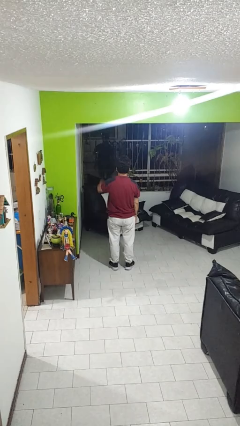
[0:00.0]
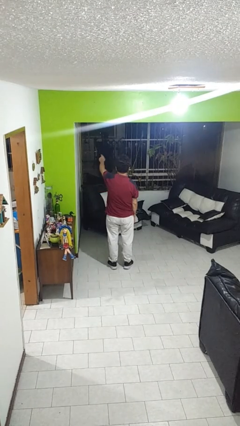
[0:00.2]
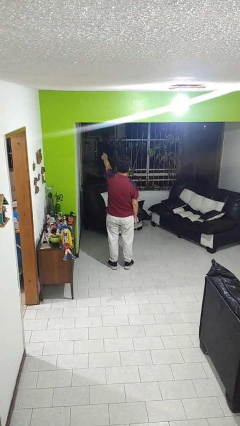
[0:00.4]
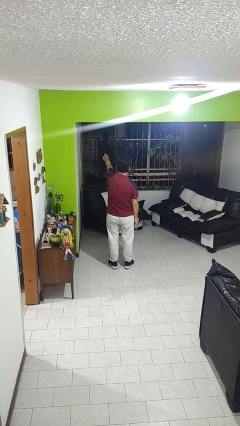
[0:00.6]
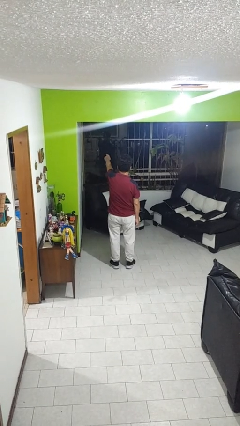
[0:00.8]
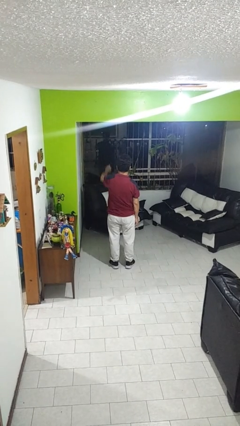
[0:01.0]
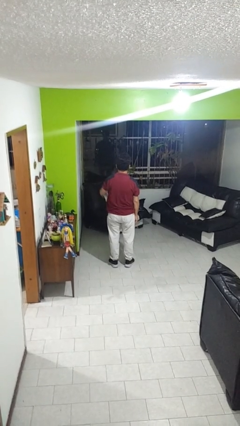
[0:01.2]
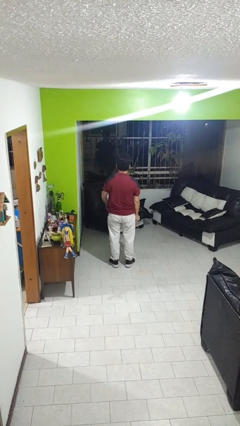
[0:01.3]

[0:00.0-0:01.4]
person points at person

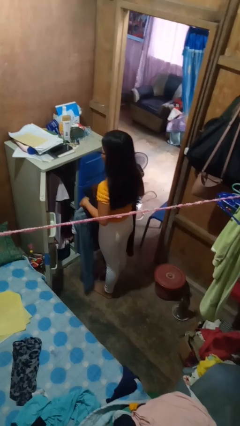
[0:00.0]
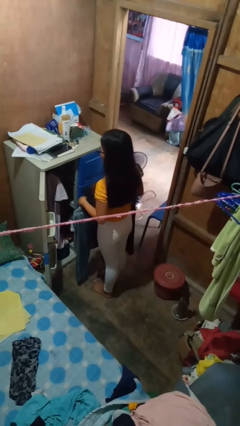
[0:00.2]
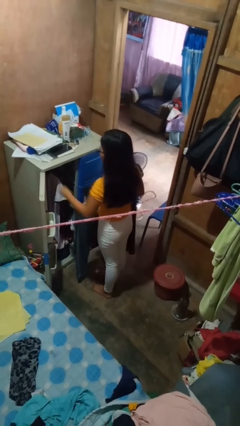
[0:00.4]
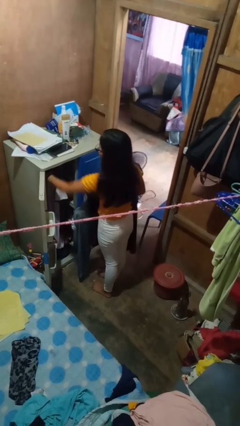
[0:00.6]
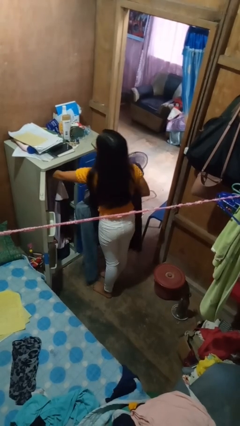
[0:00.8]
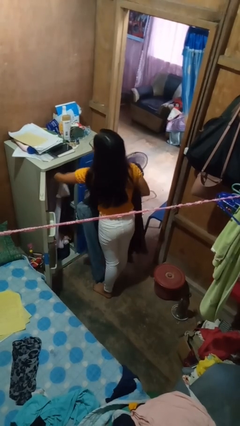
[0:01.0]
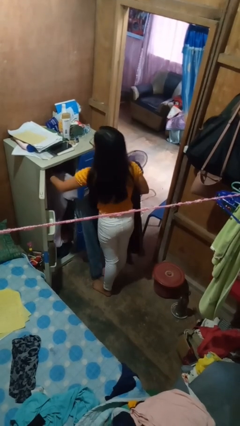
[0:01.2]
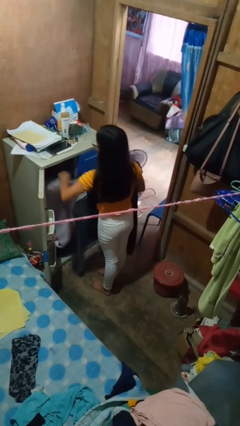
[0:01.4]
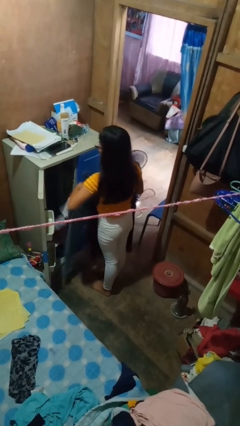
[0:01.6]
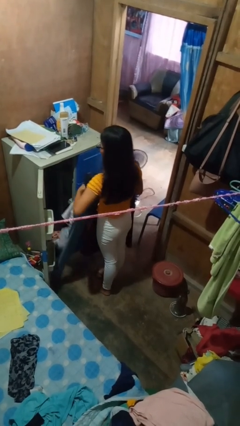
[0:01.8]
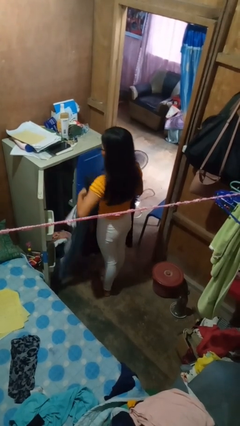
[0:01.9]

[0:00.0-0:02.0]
person takes clothes from closet

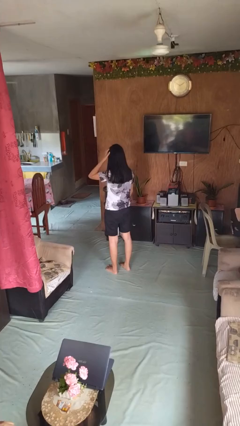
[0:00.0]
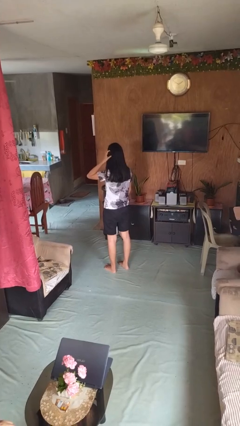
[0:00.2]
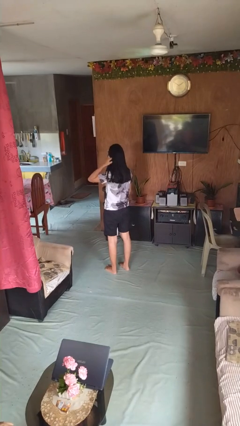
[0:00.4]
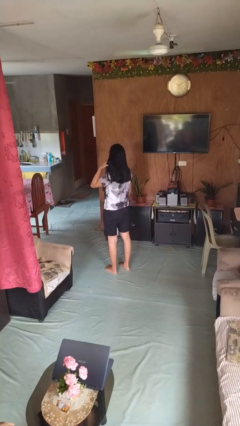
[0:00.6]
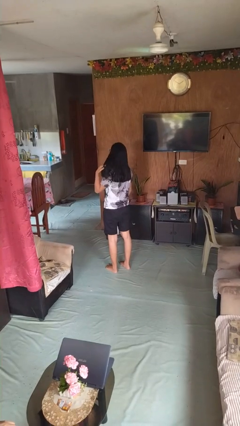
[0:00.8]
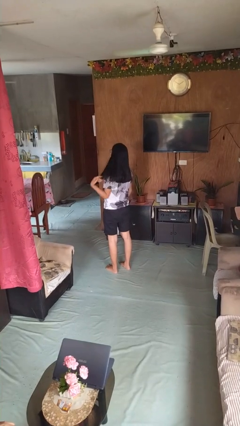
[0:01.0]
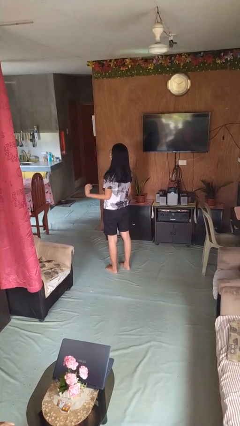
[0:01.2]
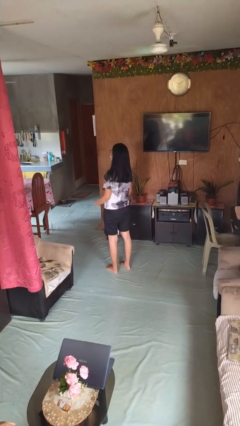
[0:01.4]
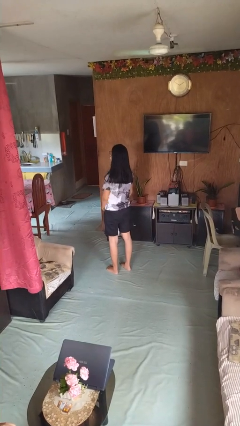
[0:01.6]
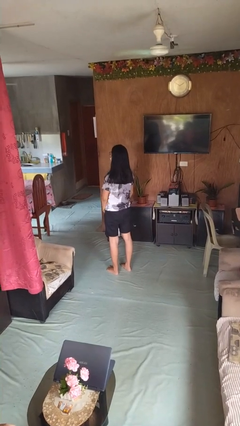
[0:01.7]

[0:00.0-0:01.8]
person strokes hair

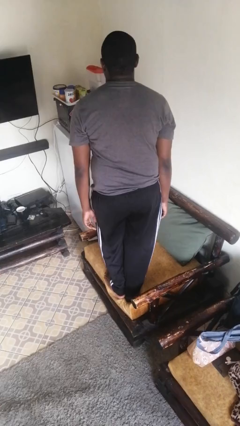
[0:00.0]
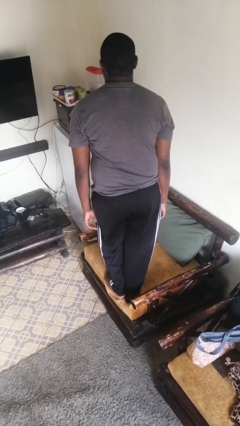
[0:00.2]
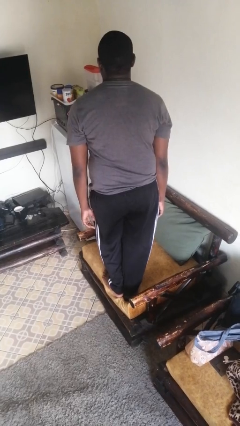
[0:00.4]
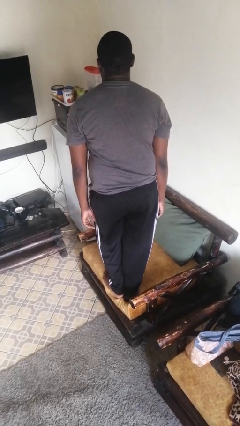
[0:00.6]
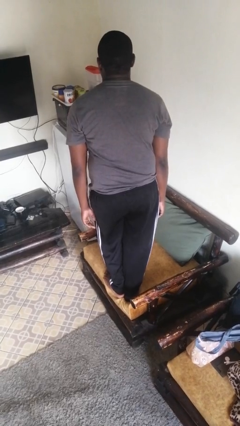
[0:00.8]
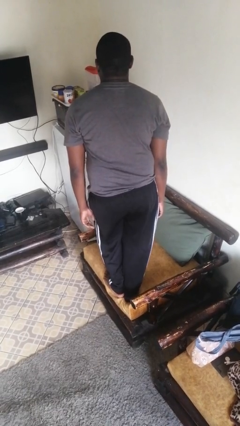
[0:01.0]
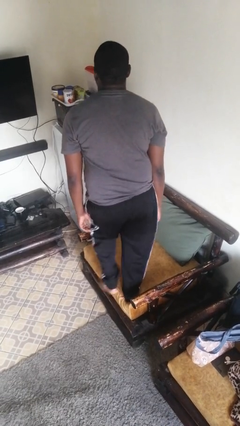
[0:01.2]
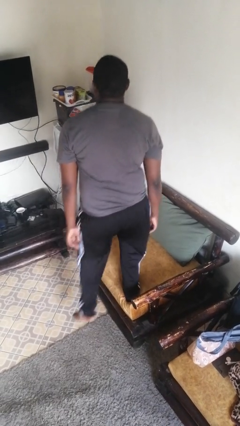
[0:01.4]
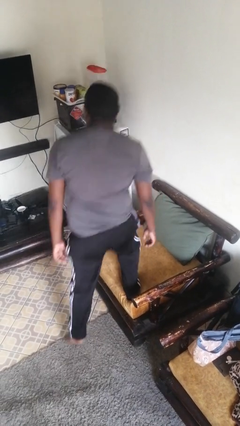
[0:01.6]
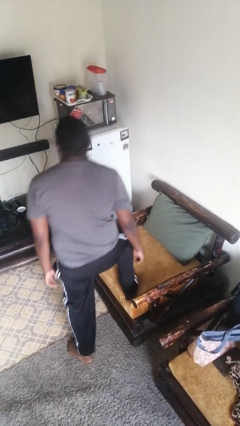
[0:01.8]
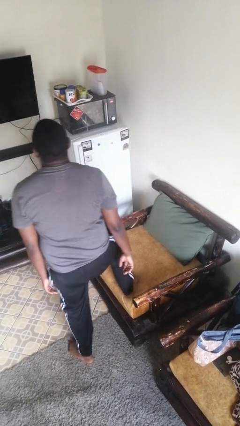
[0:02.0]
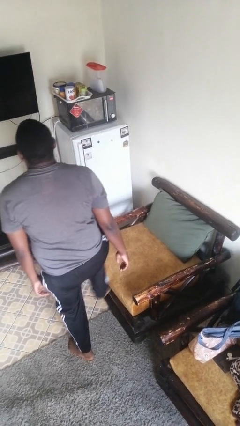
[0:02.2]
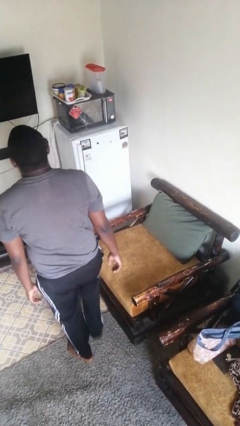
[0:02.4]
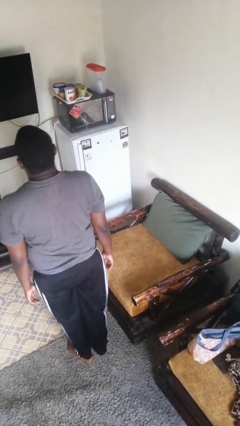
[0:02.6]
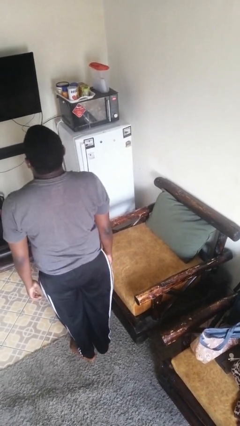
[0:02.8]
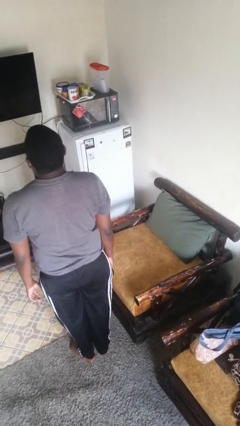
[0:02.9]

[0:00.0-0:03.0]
person climbs off couch

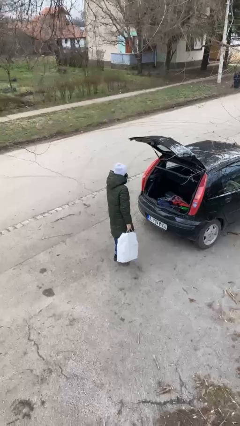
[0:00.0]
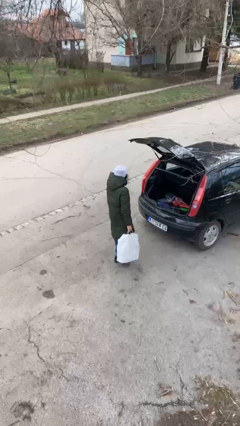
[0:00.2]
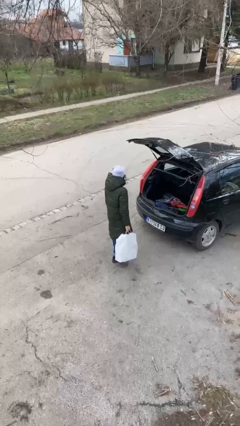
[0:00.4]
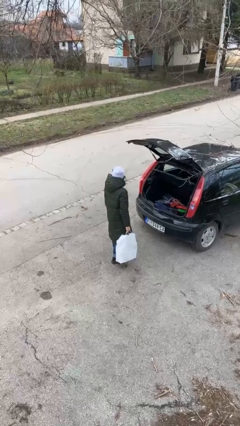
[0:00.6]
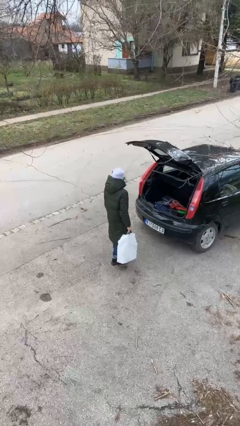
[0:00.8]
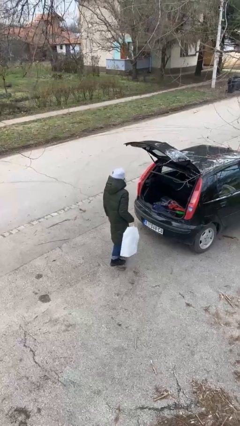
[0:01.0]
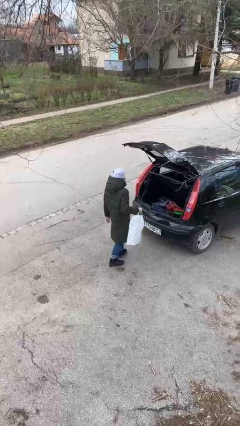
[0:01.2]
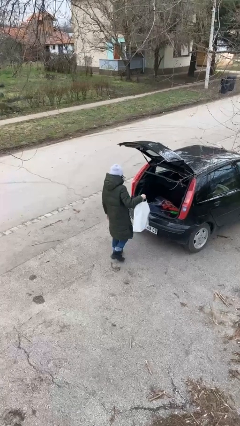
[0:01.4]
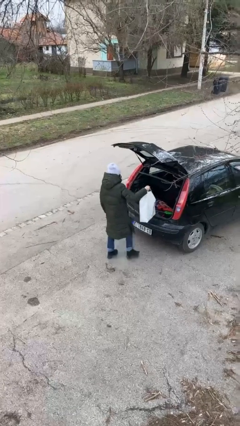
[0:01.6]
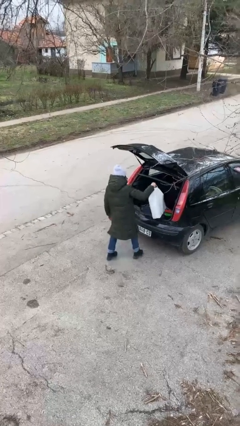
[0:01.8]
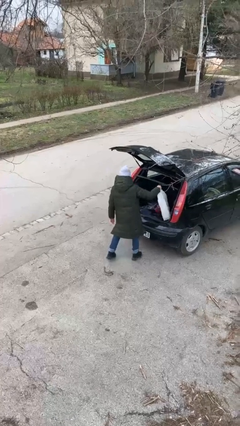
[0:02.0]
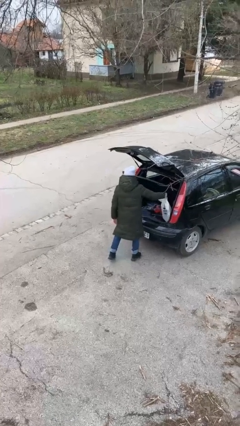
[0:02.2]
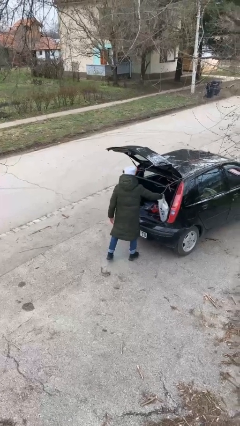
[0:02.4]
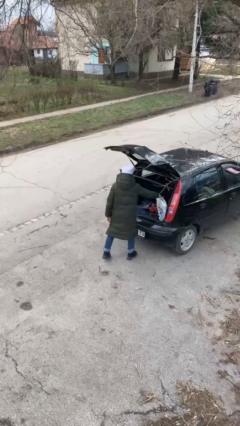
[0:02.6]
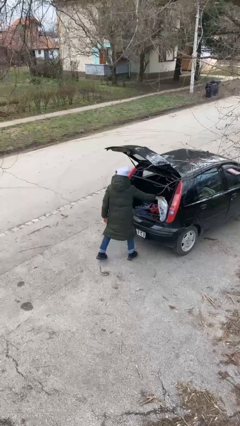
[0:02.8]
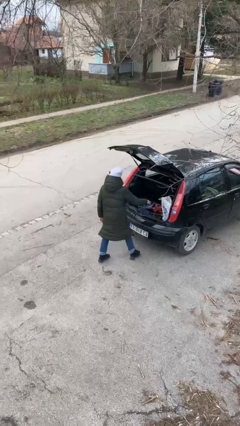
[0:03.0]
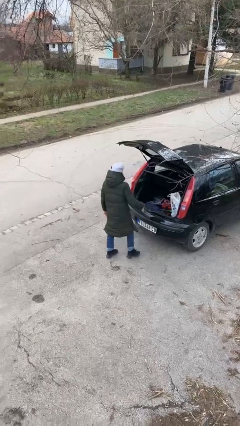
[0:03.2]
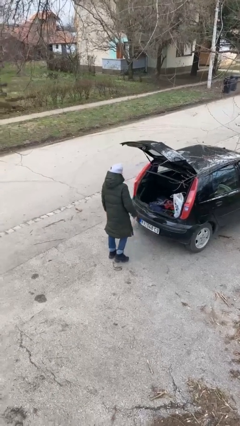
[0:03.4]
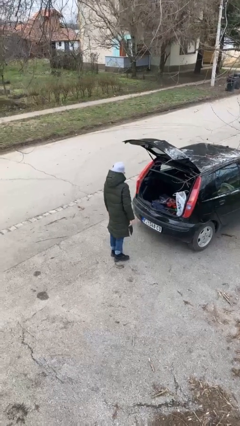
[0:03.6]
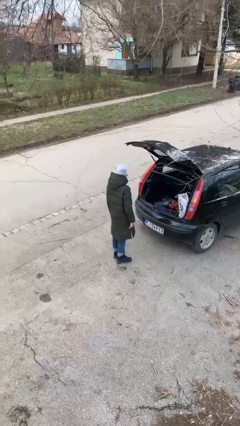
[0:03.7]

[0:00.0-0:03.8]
person loads car

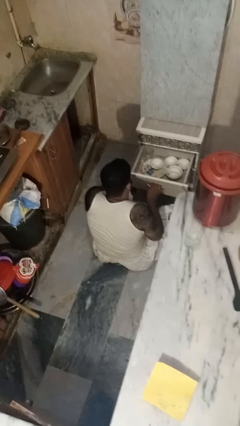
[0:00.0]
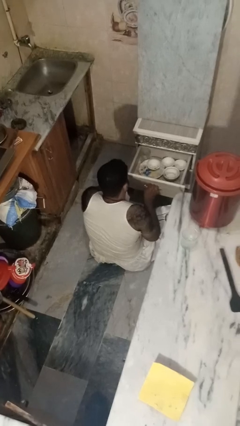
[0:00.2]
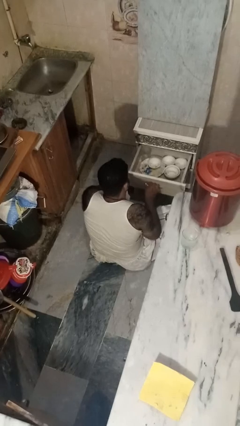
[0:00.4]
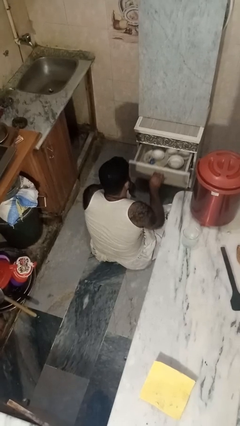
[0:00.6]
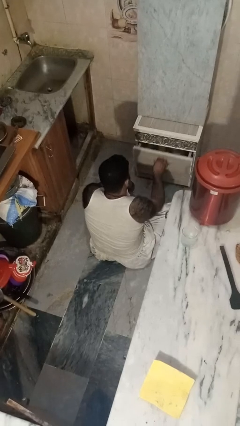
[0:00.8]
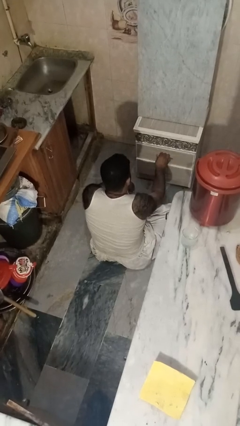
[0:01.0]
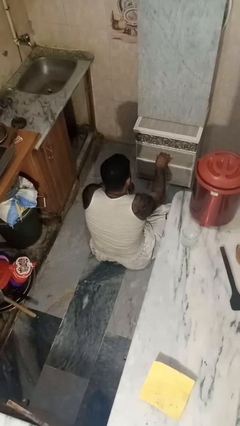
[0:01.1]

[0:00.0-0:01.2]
person closes kitchen drawer

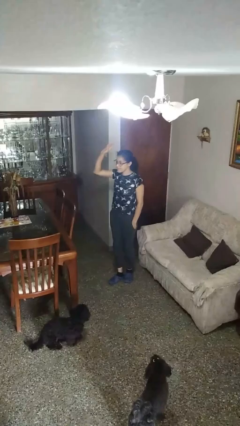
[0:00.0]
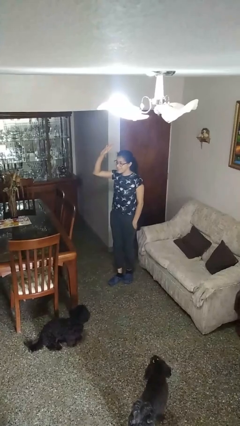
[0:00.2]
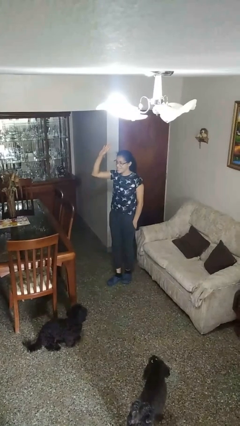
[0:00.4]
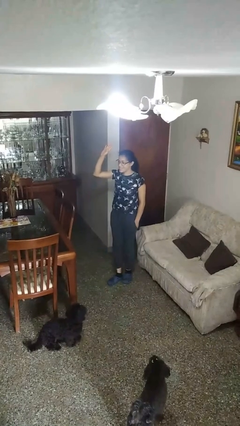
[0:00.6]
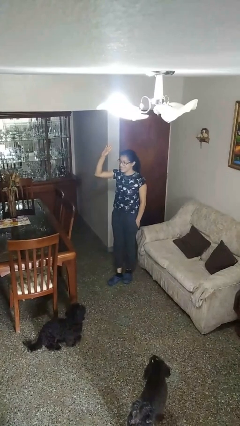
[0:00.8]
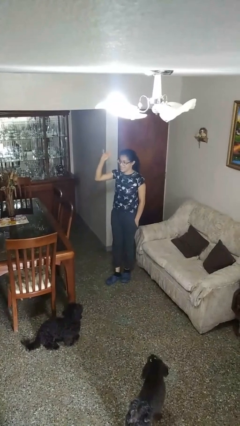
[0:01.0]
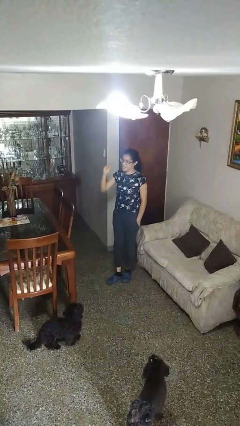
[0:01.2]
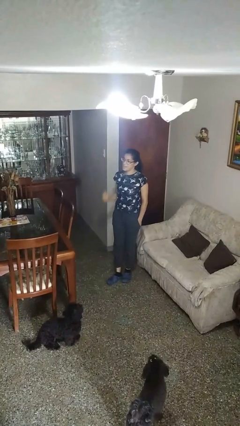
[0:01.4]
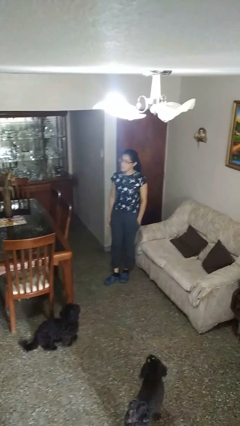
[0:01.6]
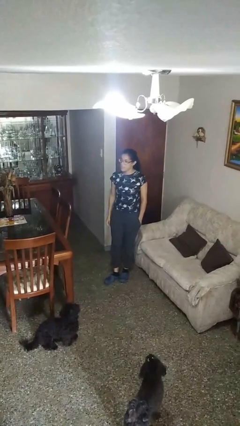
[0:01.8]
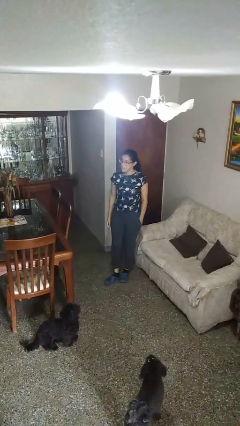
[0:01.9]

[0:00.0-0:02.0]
person gestures raise hand

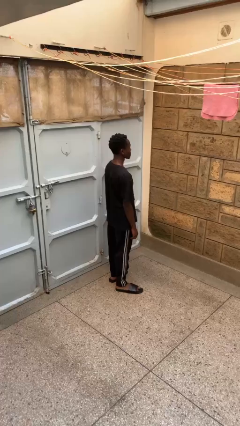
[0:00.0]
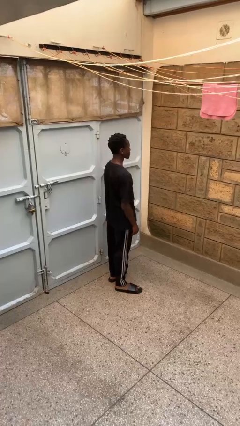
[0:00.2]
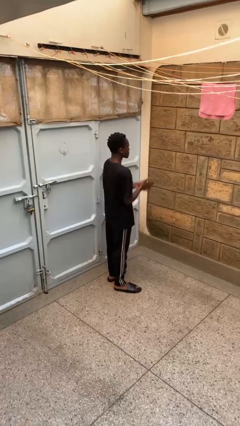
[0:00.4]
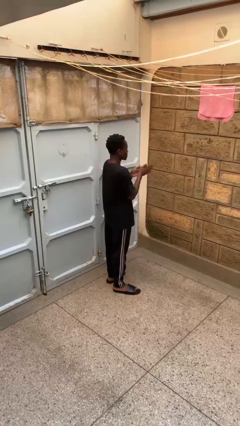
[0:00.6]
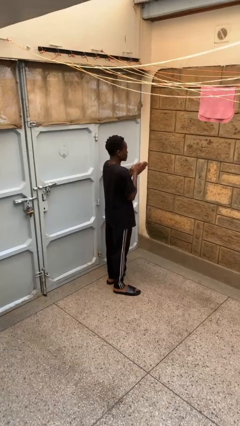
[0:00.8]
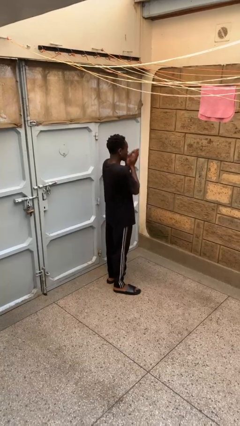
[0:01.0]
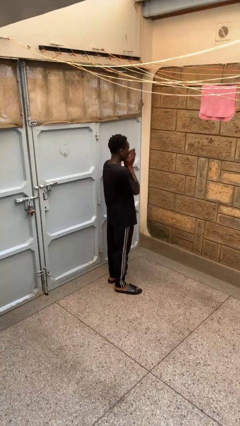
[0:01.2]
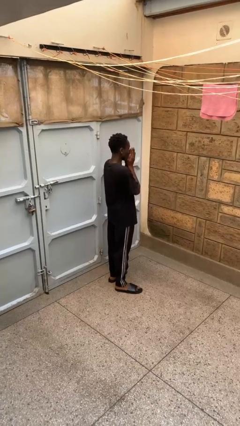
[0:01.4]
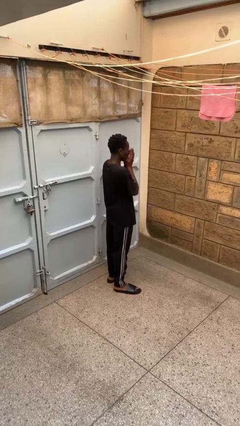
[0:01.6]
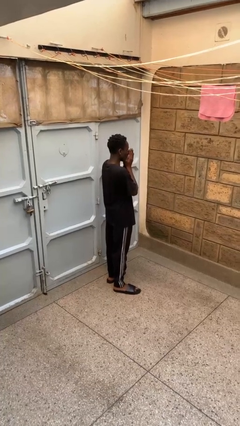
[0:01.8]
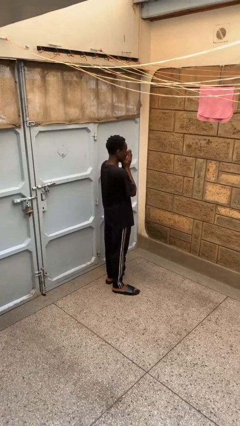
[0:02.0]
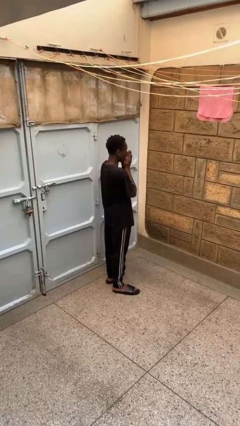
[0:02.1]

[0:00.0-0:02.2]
person blows into hands
